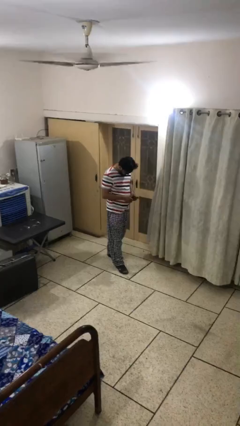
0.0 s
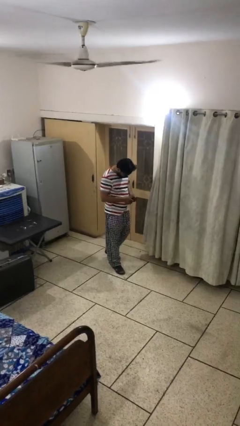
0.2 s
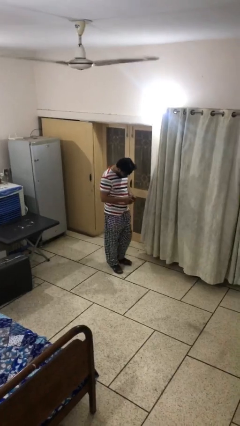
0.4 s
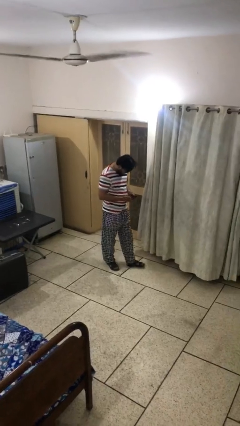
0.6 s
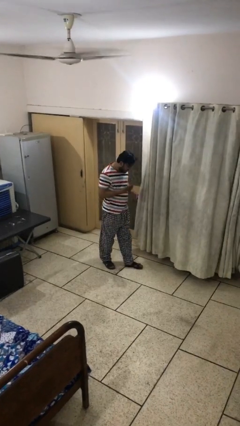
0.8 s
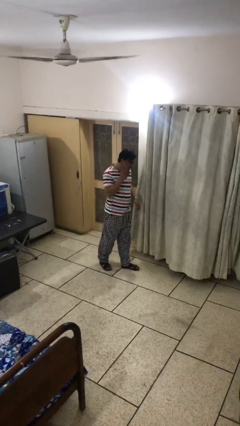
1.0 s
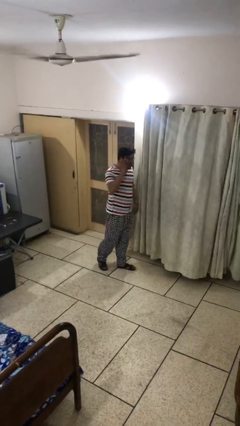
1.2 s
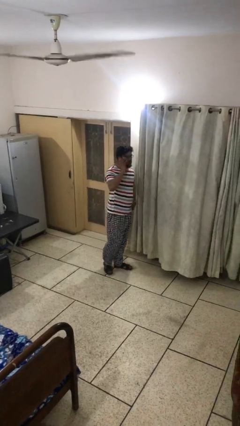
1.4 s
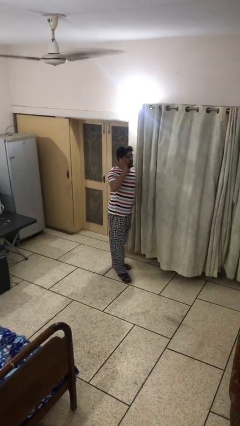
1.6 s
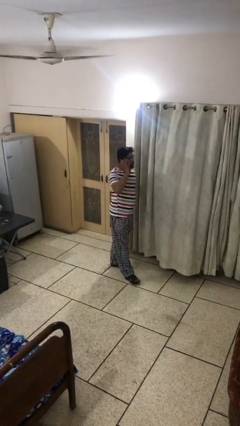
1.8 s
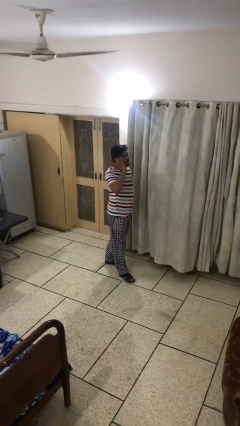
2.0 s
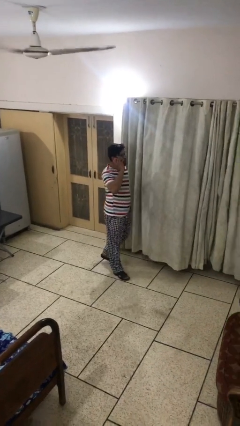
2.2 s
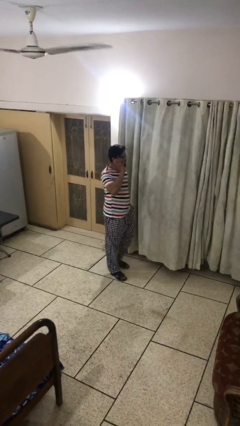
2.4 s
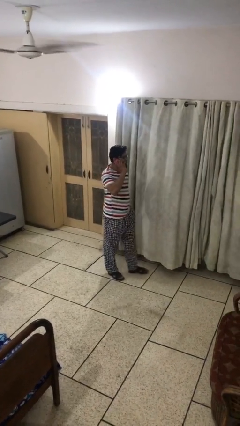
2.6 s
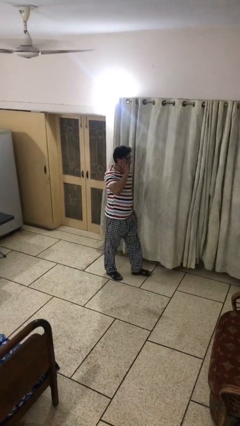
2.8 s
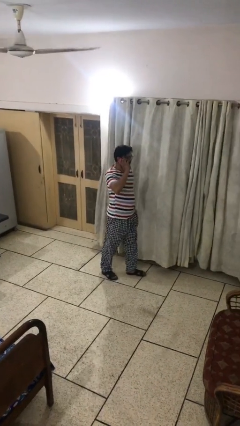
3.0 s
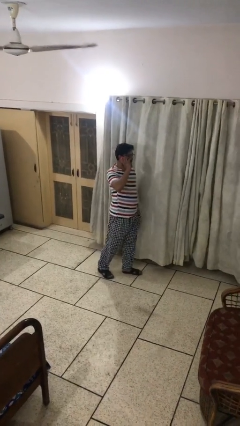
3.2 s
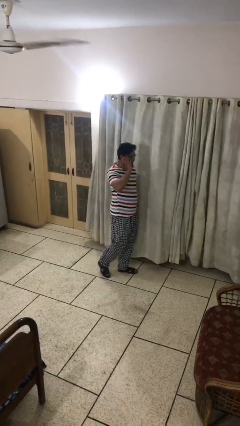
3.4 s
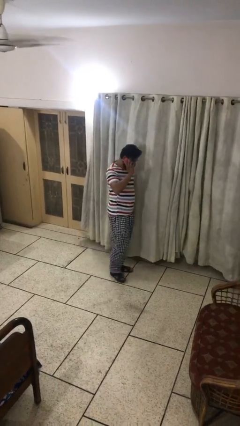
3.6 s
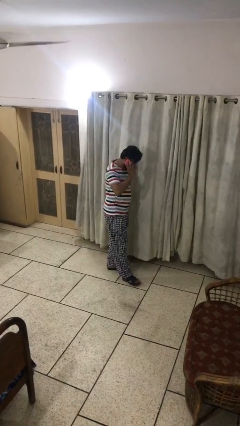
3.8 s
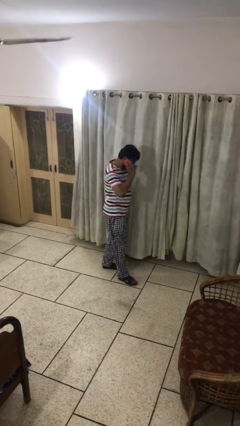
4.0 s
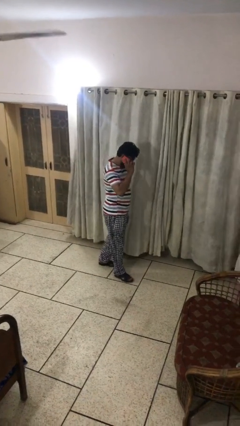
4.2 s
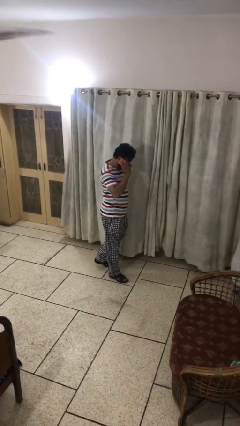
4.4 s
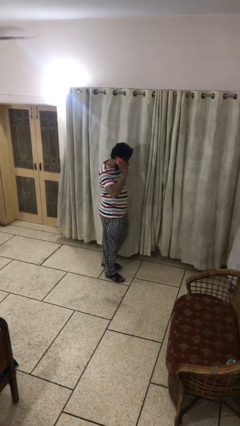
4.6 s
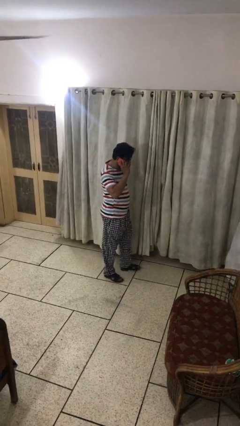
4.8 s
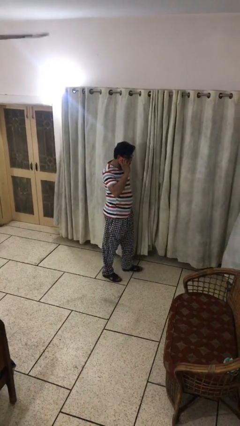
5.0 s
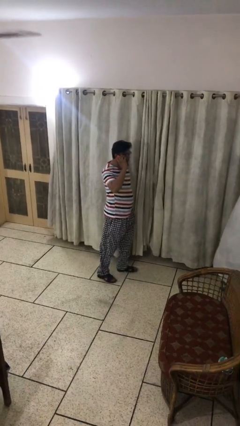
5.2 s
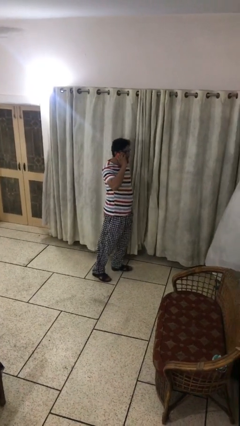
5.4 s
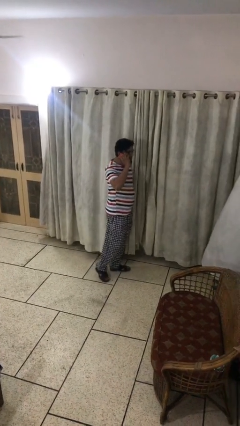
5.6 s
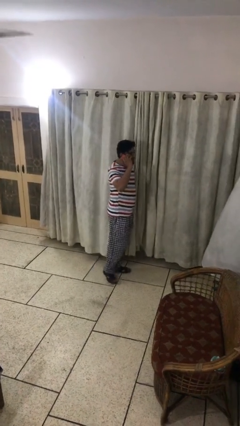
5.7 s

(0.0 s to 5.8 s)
person talks on phone

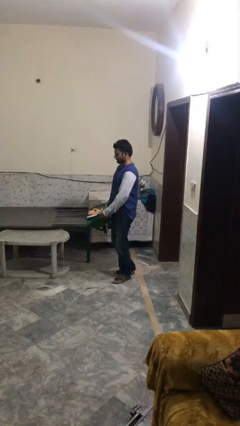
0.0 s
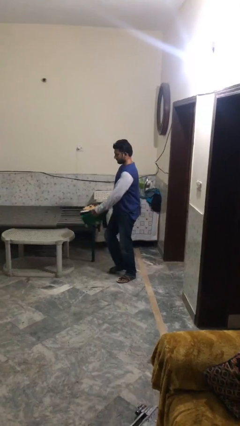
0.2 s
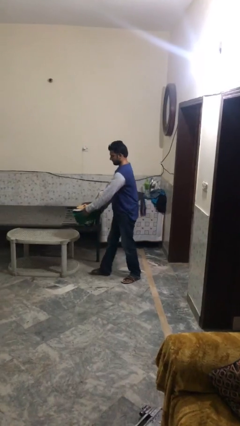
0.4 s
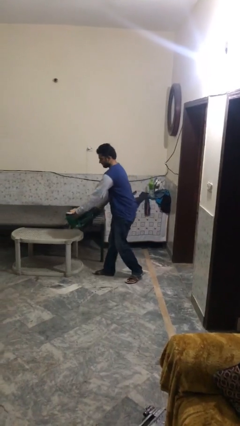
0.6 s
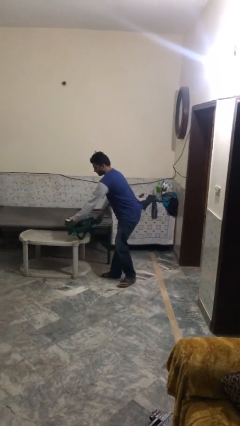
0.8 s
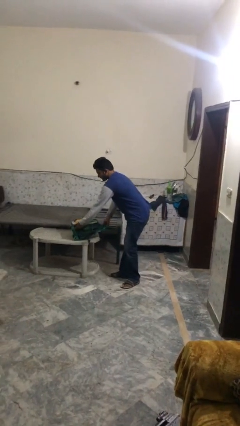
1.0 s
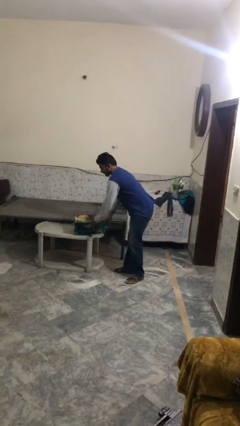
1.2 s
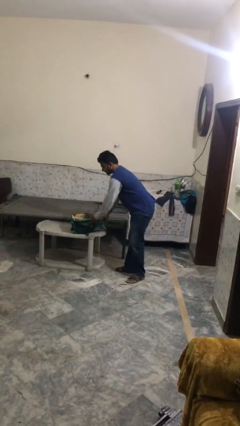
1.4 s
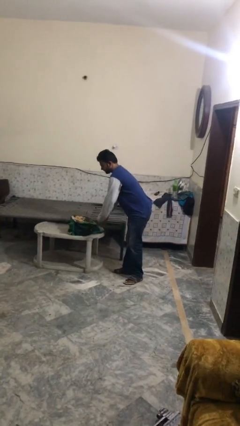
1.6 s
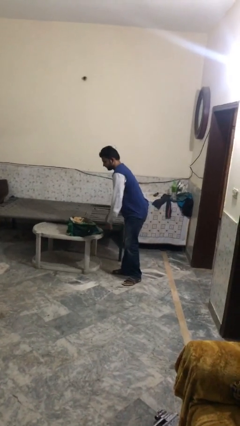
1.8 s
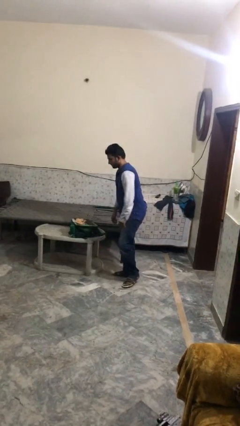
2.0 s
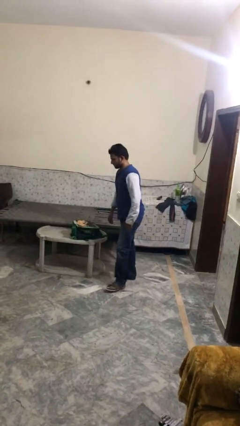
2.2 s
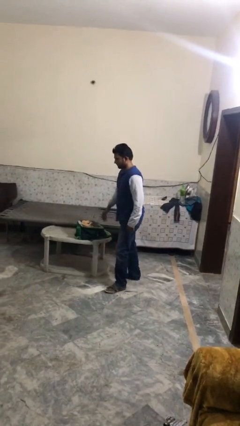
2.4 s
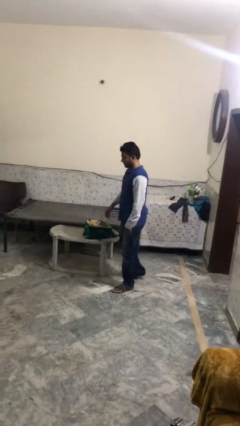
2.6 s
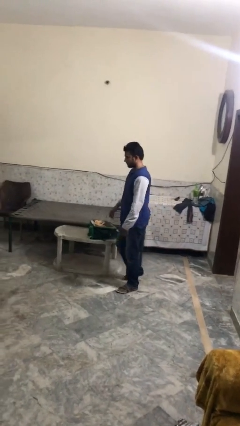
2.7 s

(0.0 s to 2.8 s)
person puts down object on table

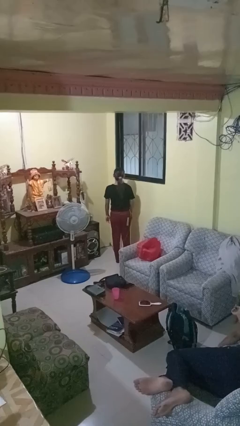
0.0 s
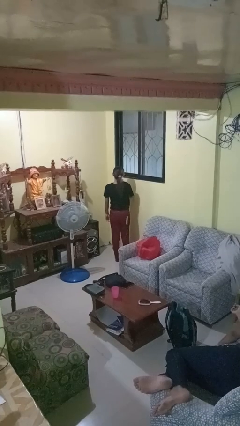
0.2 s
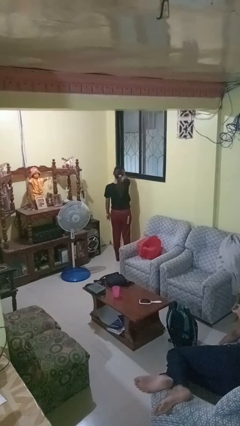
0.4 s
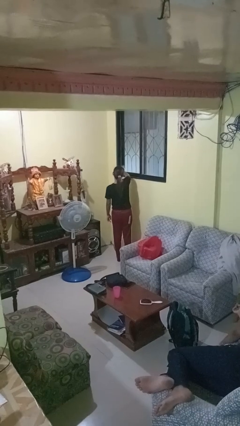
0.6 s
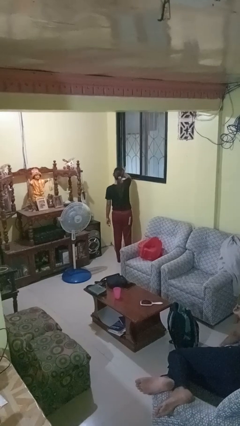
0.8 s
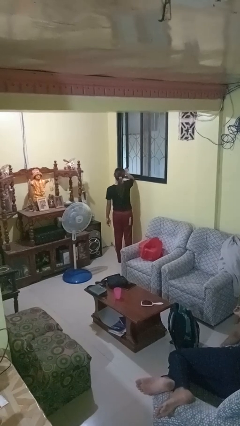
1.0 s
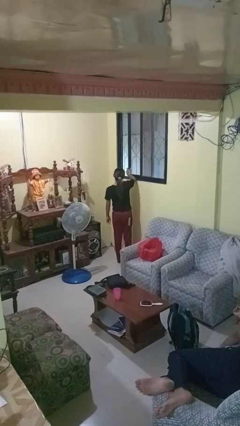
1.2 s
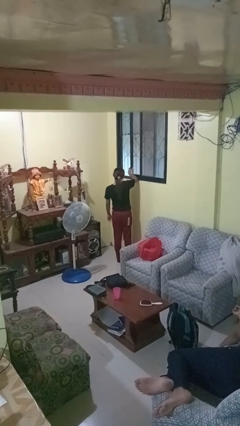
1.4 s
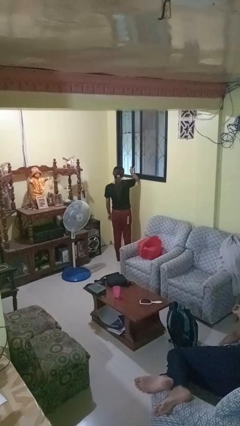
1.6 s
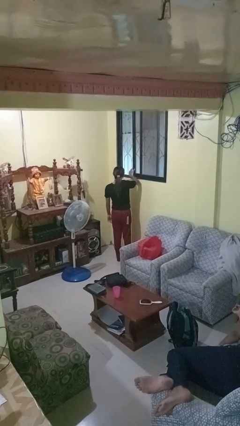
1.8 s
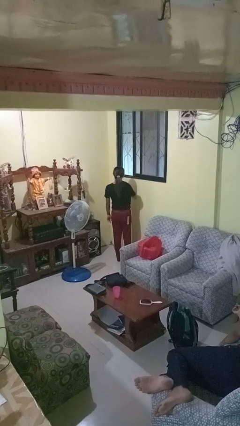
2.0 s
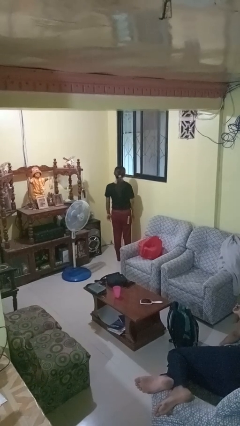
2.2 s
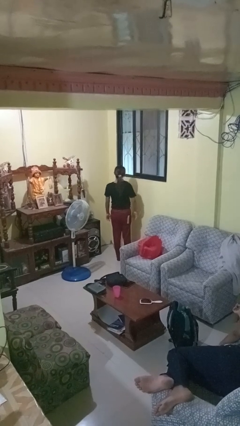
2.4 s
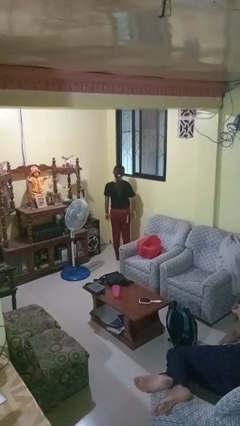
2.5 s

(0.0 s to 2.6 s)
person opens home window

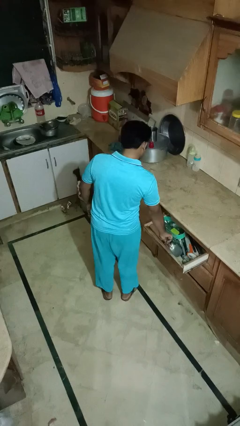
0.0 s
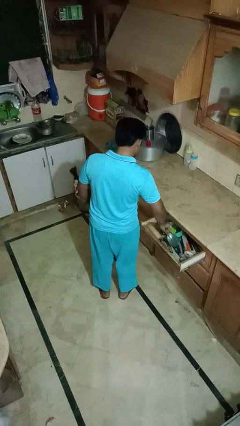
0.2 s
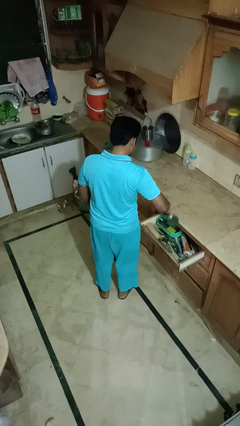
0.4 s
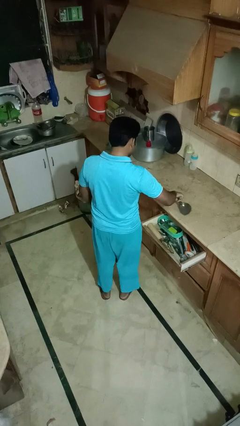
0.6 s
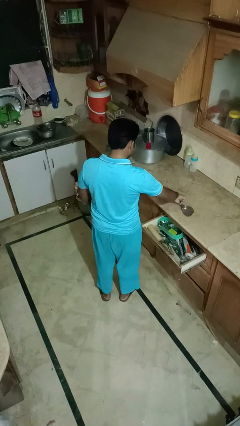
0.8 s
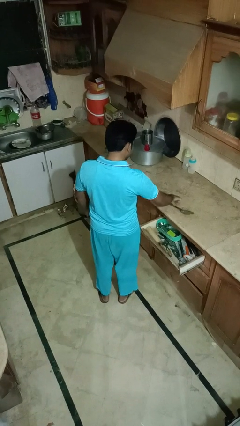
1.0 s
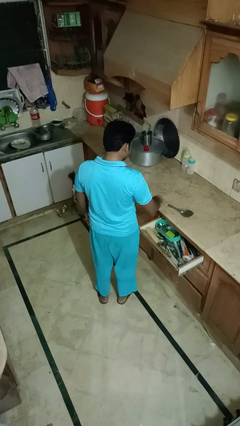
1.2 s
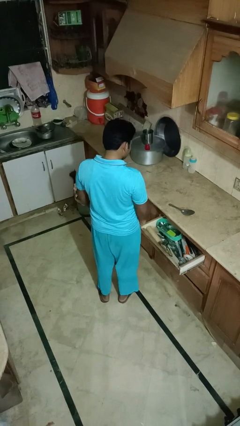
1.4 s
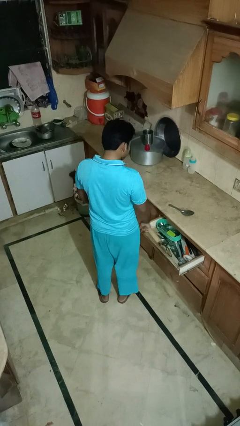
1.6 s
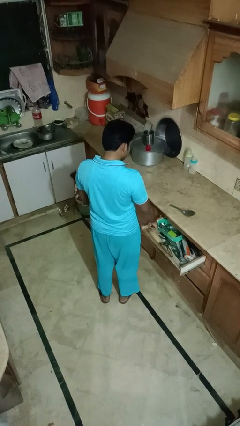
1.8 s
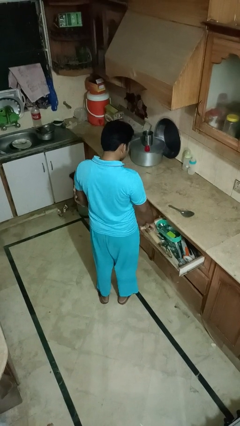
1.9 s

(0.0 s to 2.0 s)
person takes object from kitchen drawer

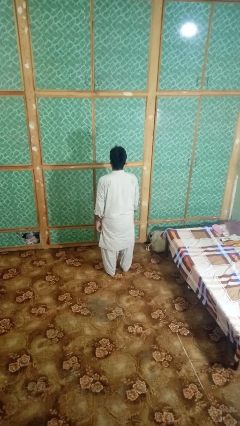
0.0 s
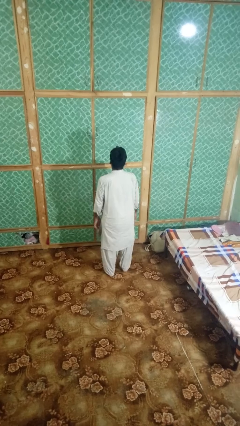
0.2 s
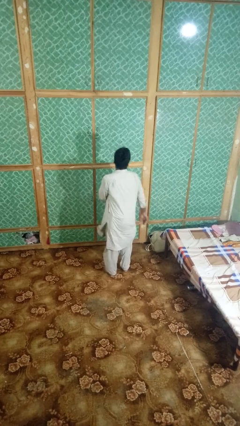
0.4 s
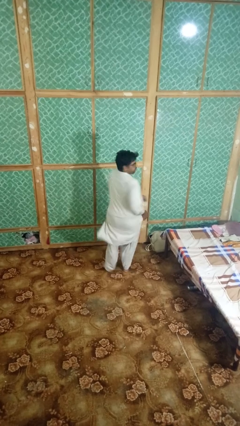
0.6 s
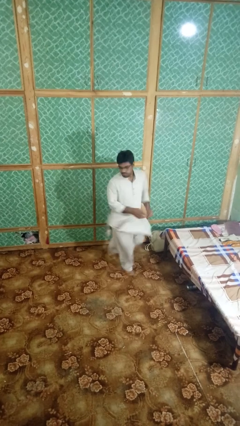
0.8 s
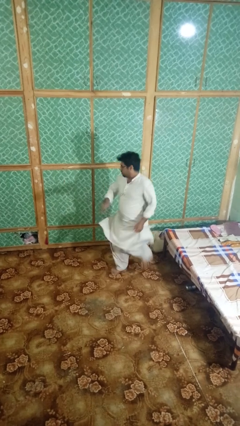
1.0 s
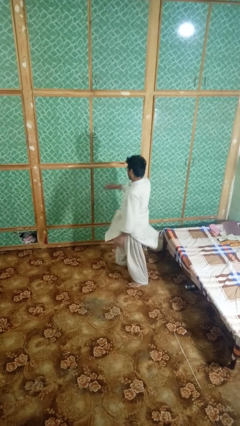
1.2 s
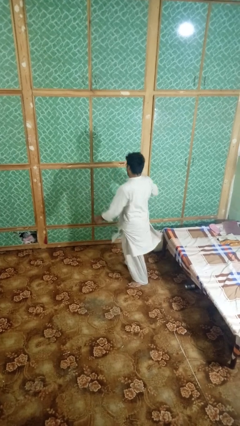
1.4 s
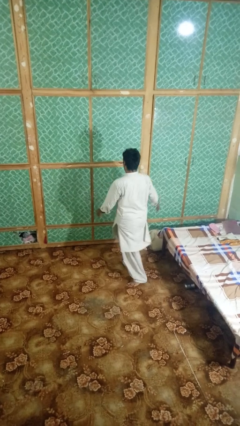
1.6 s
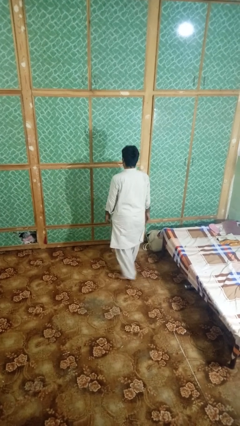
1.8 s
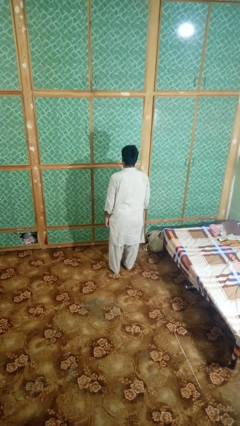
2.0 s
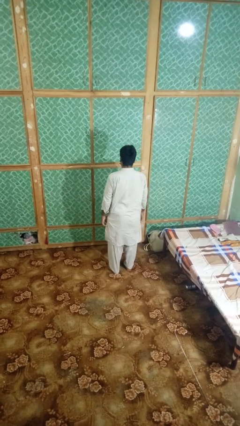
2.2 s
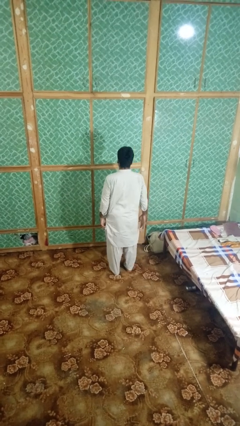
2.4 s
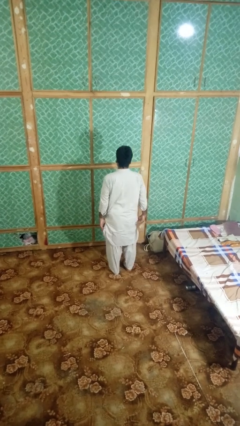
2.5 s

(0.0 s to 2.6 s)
person twirls

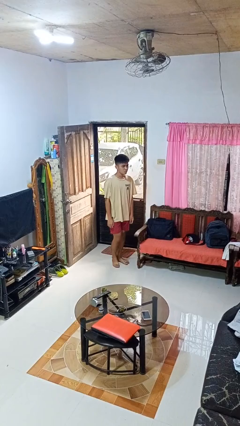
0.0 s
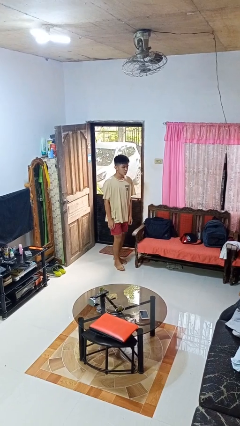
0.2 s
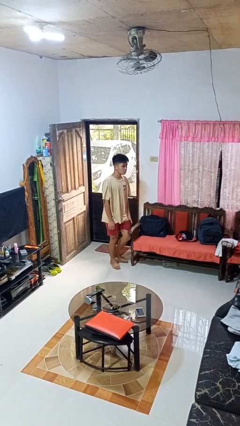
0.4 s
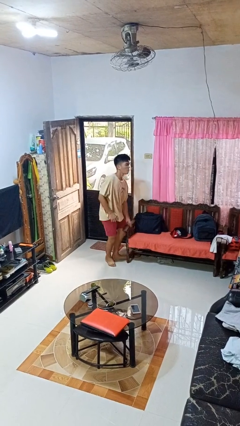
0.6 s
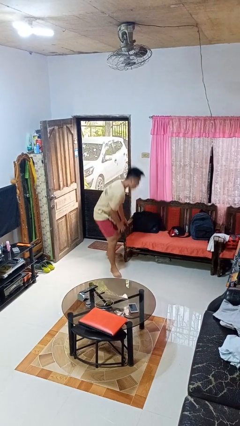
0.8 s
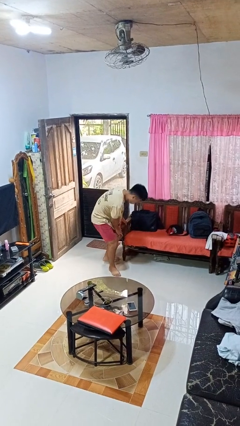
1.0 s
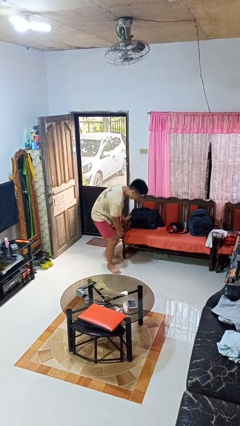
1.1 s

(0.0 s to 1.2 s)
person trips on object on floor

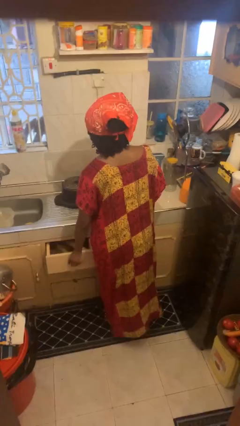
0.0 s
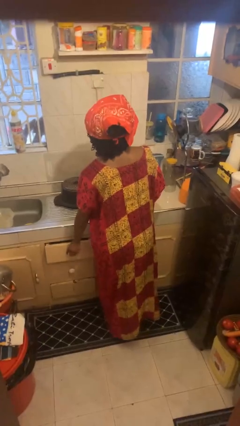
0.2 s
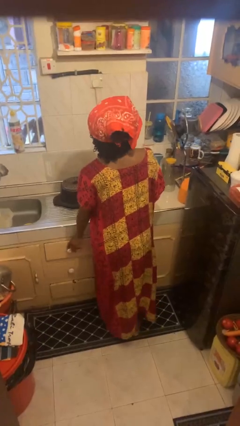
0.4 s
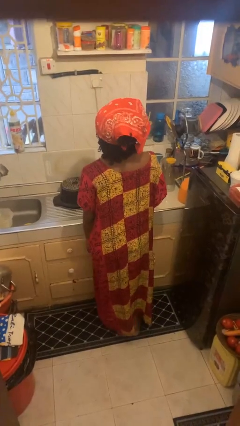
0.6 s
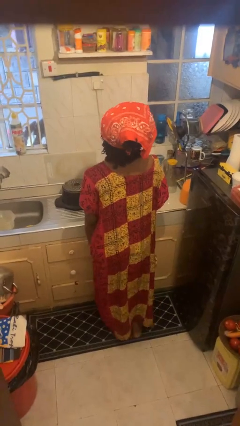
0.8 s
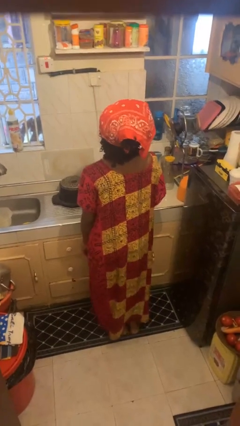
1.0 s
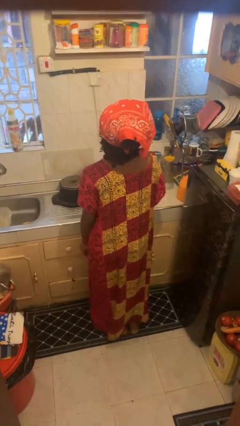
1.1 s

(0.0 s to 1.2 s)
person closes kitchen drawer
